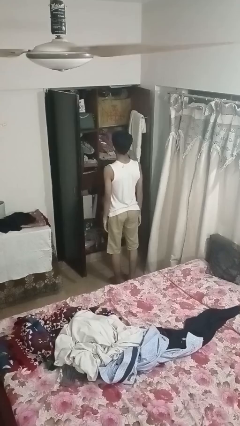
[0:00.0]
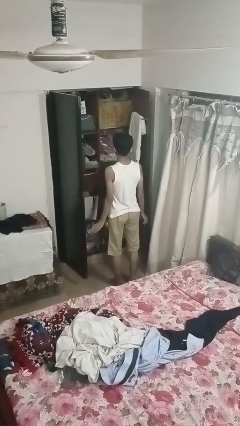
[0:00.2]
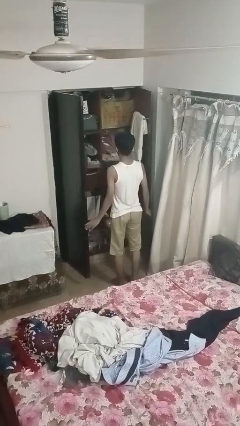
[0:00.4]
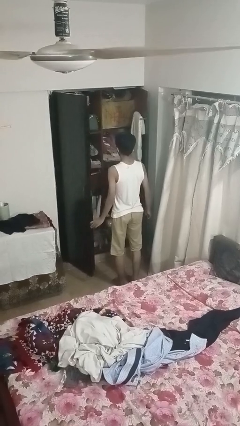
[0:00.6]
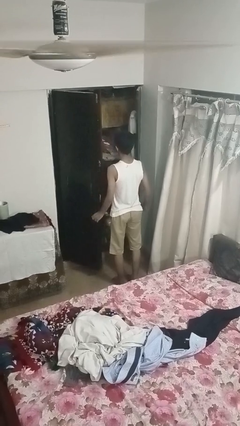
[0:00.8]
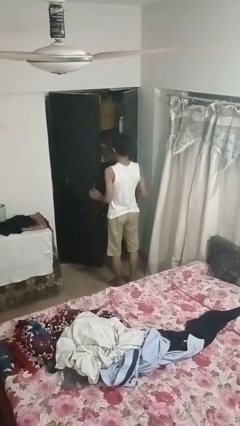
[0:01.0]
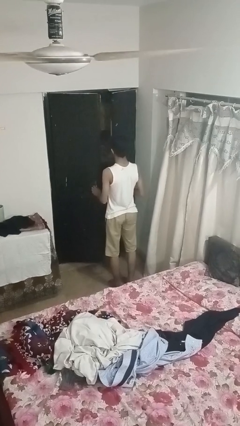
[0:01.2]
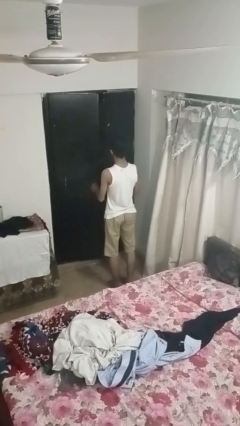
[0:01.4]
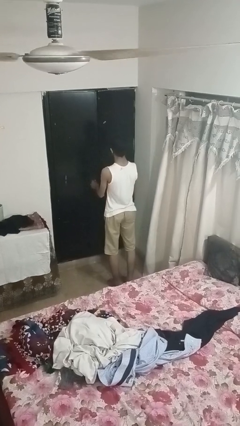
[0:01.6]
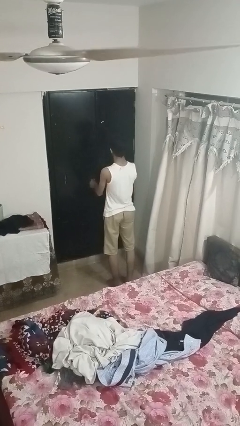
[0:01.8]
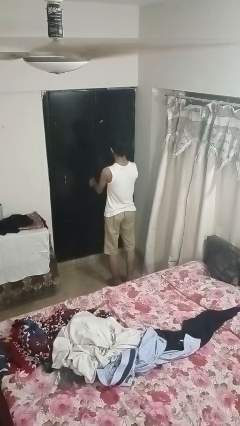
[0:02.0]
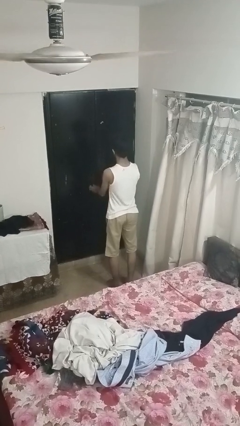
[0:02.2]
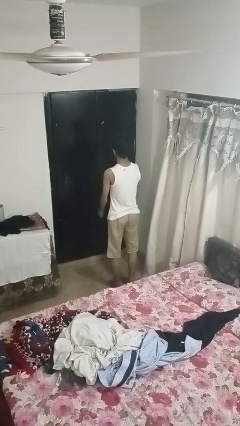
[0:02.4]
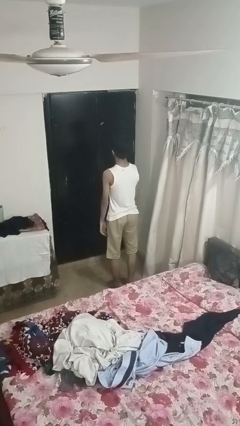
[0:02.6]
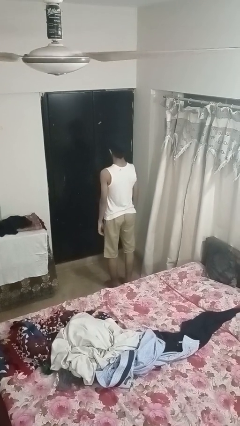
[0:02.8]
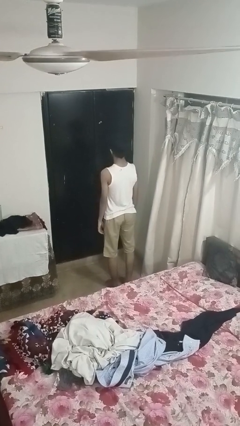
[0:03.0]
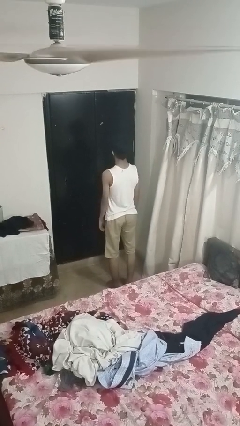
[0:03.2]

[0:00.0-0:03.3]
person closes closet door

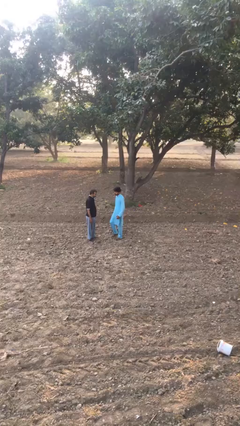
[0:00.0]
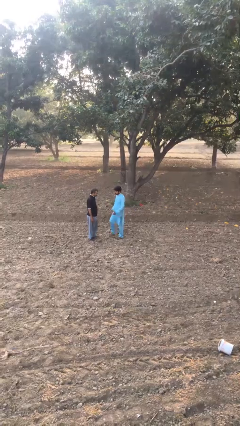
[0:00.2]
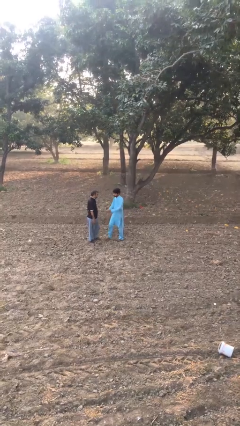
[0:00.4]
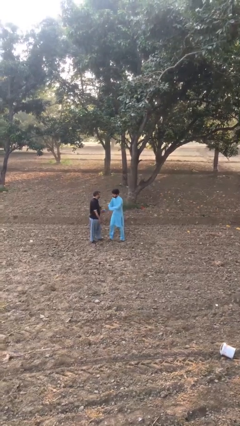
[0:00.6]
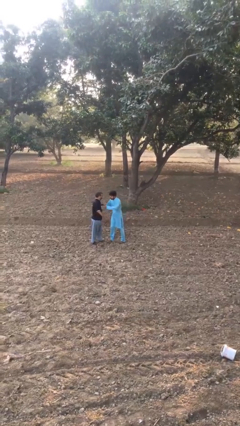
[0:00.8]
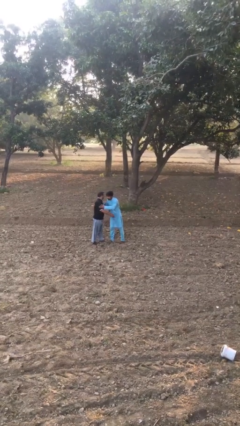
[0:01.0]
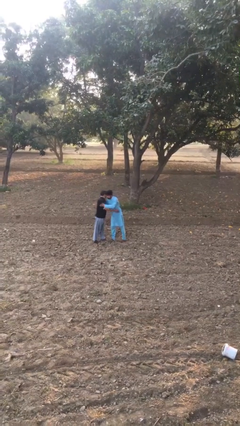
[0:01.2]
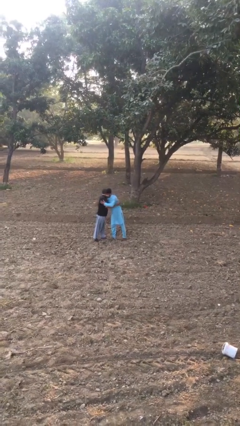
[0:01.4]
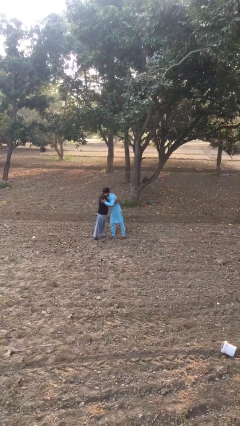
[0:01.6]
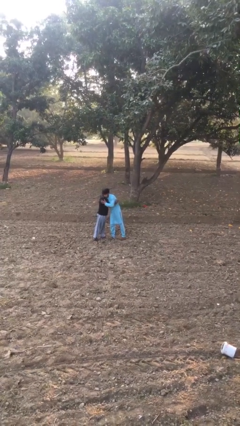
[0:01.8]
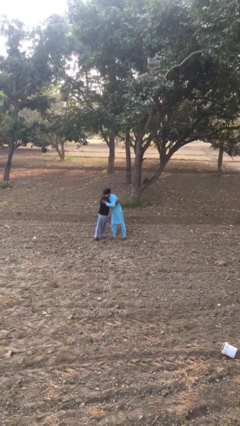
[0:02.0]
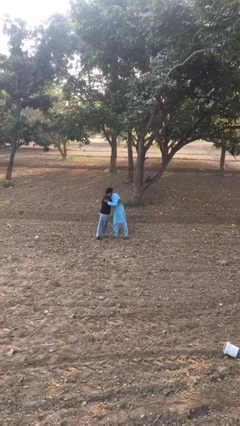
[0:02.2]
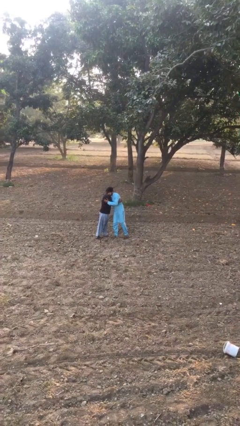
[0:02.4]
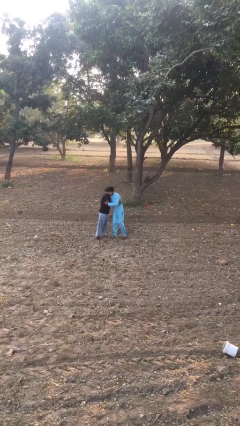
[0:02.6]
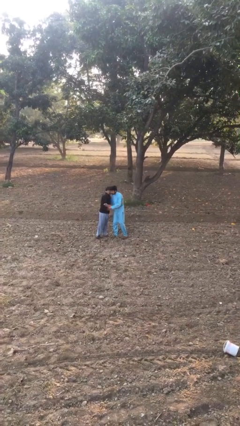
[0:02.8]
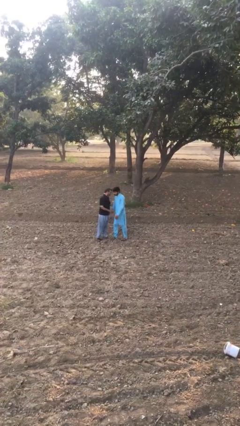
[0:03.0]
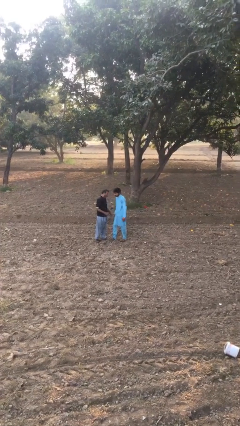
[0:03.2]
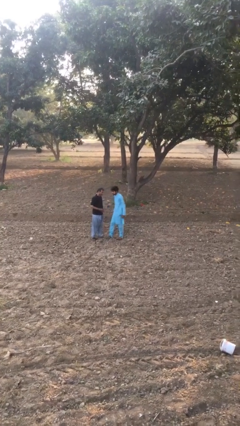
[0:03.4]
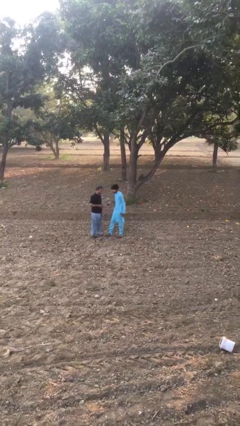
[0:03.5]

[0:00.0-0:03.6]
person embraces person

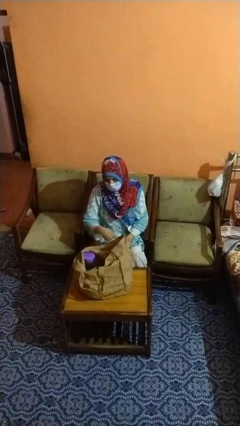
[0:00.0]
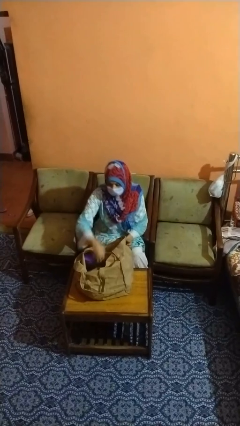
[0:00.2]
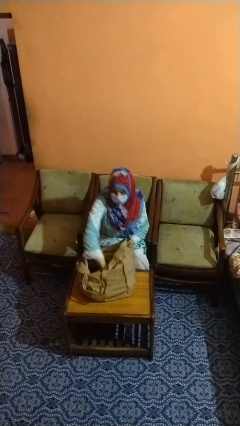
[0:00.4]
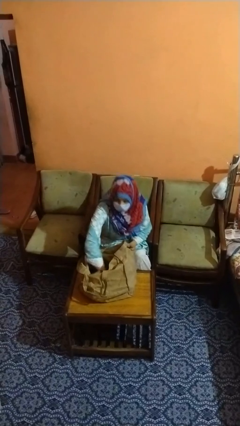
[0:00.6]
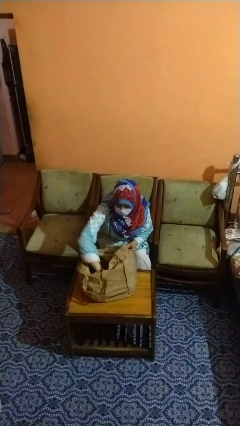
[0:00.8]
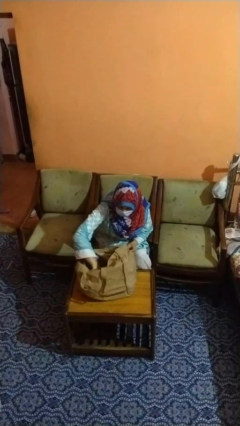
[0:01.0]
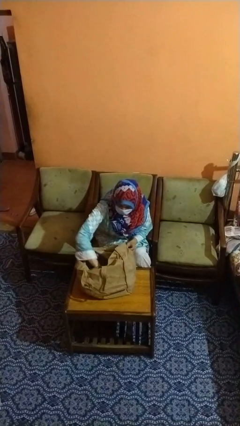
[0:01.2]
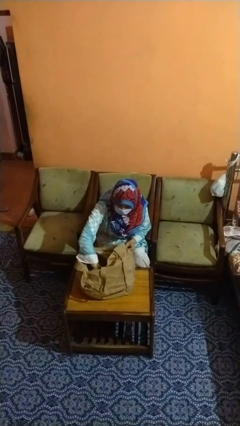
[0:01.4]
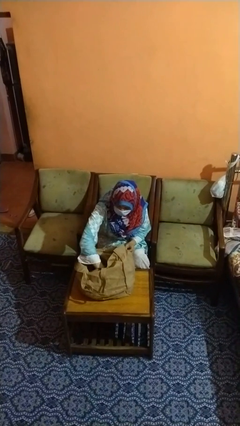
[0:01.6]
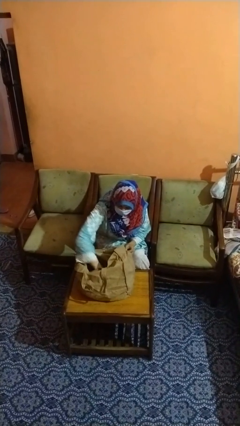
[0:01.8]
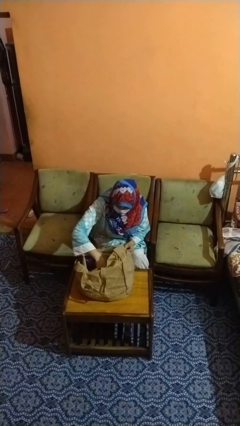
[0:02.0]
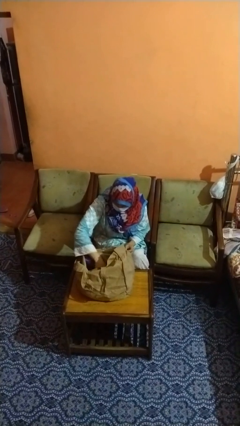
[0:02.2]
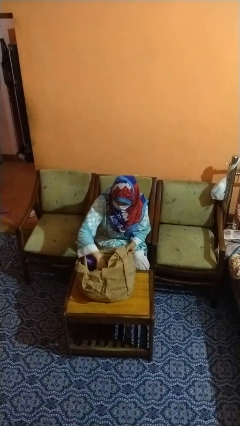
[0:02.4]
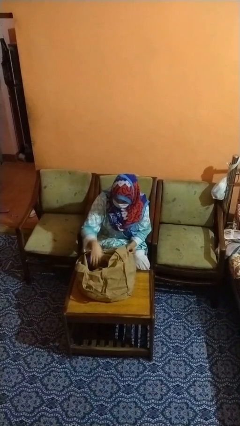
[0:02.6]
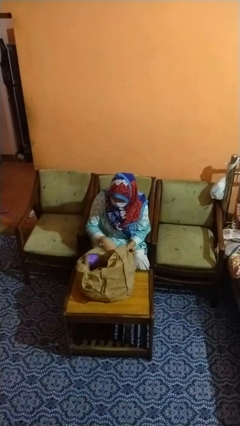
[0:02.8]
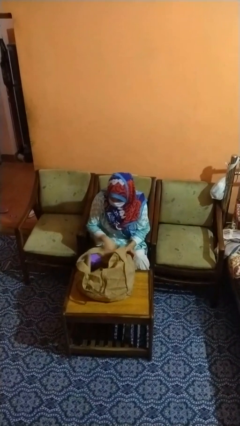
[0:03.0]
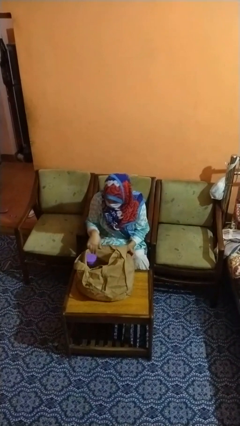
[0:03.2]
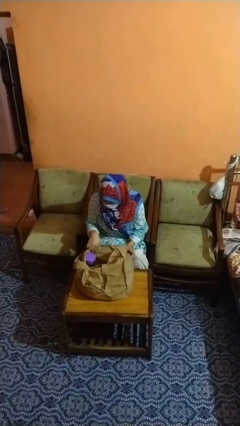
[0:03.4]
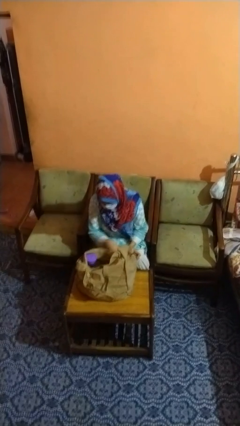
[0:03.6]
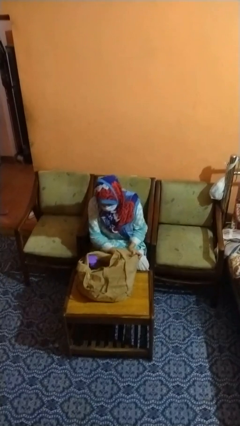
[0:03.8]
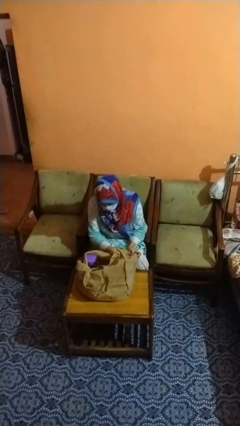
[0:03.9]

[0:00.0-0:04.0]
person searches in bag

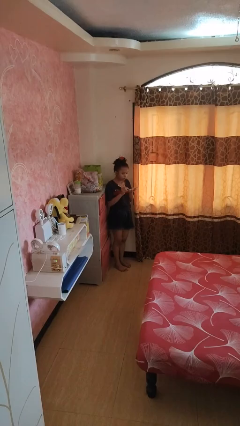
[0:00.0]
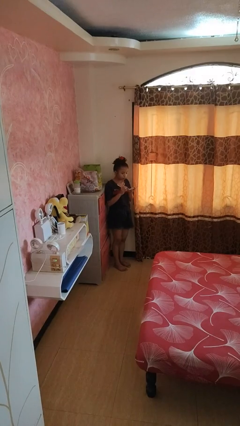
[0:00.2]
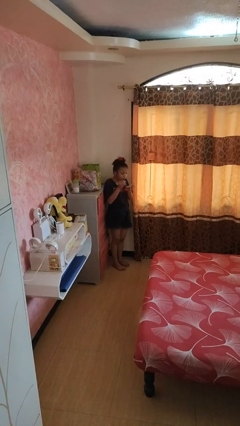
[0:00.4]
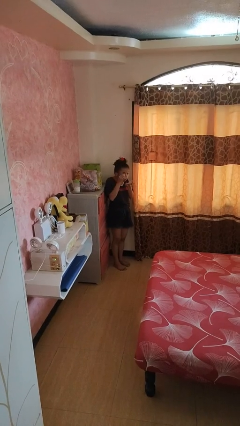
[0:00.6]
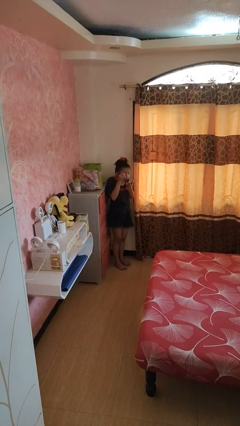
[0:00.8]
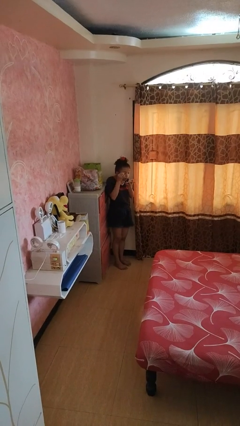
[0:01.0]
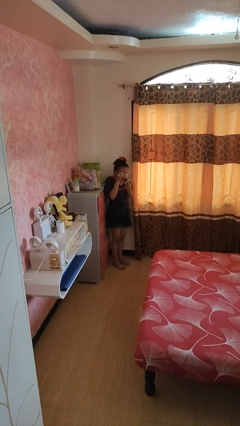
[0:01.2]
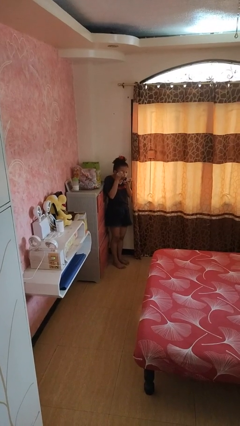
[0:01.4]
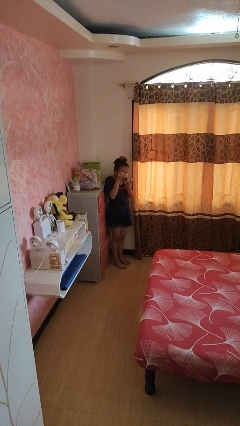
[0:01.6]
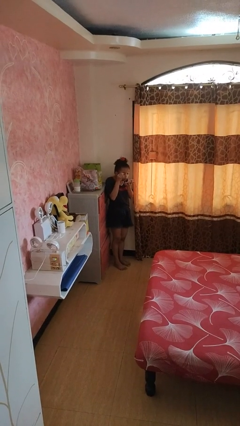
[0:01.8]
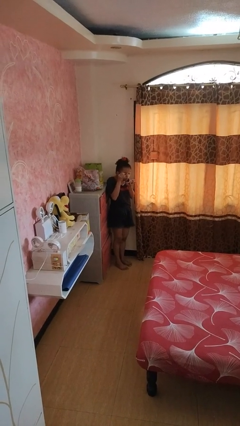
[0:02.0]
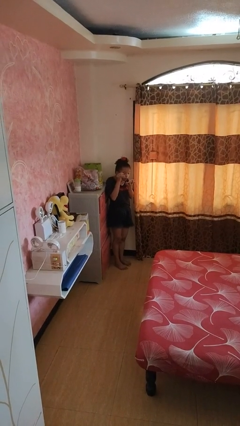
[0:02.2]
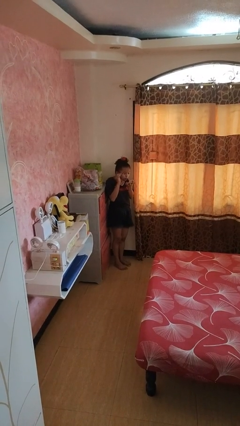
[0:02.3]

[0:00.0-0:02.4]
person applies eye makeup

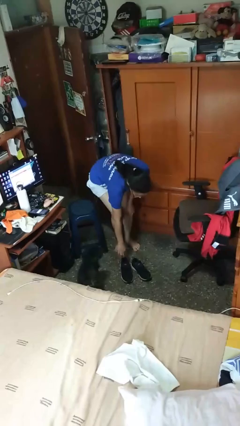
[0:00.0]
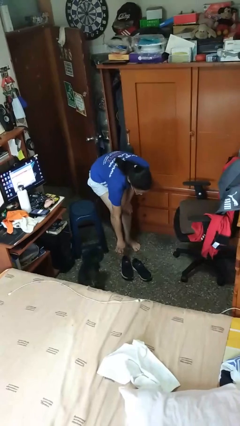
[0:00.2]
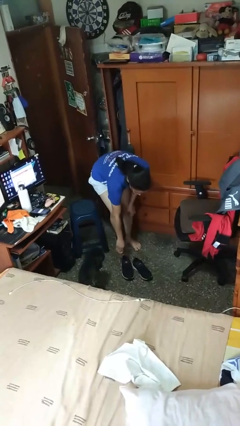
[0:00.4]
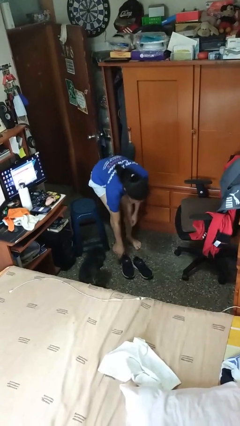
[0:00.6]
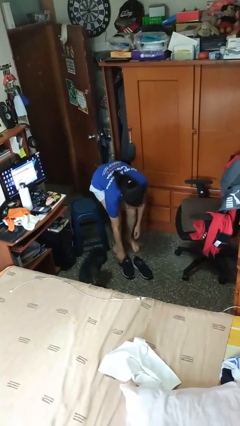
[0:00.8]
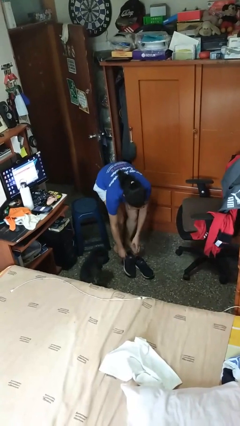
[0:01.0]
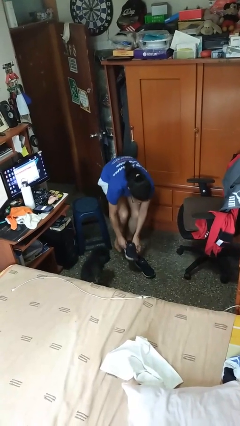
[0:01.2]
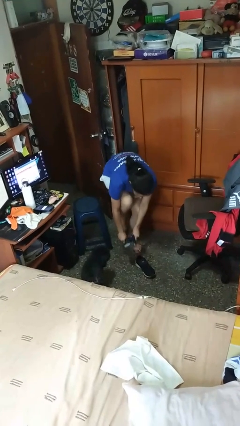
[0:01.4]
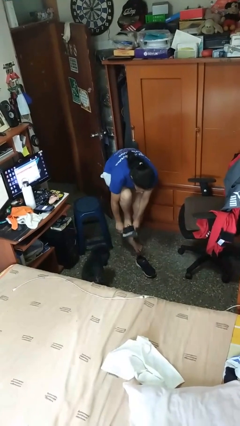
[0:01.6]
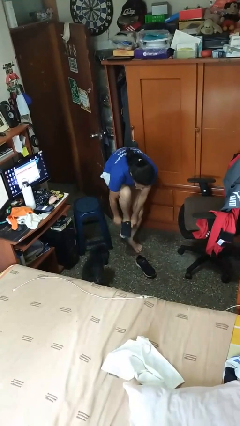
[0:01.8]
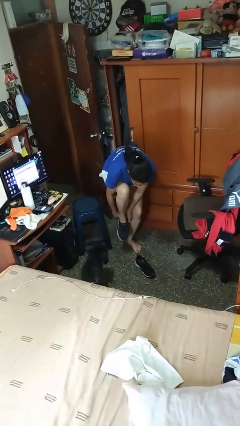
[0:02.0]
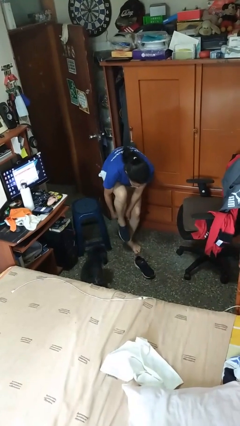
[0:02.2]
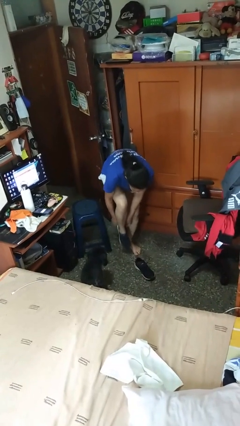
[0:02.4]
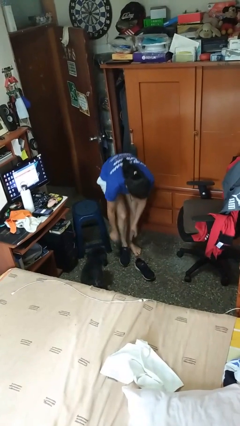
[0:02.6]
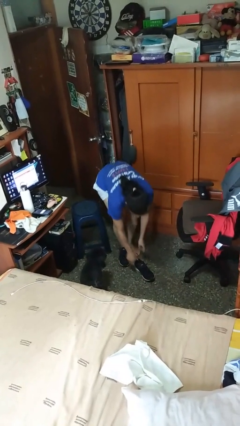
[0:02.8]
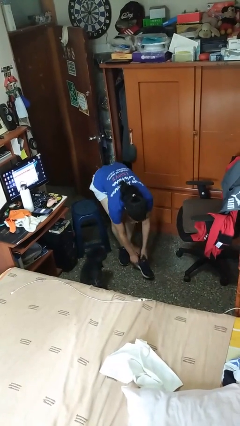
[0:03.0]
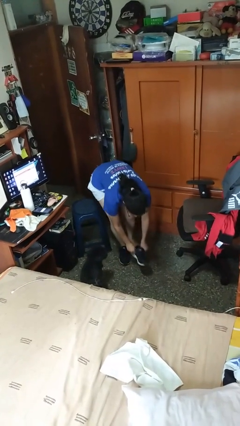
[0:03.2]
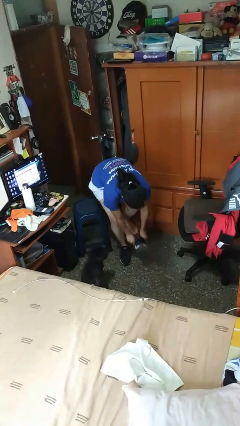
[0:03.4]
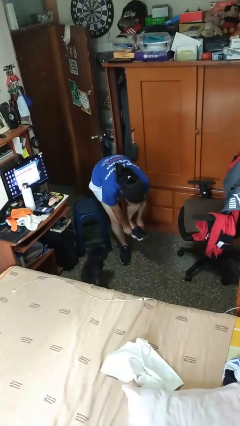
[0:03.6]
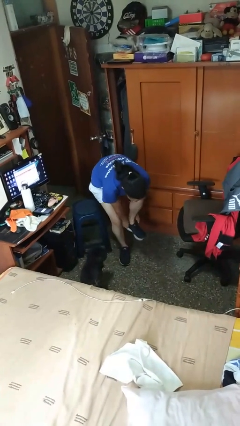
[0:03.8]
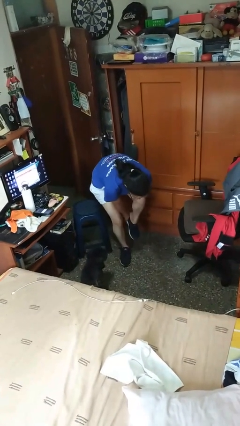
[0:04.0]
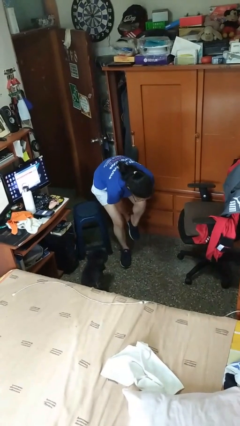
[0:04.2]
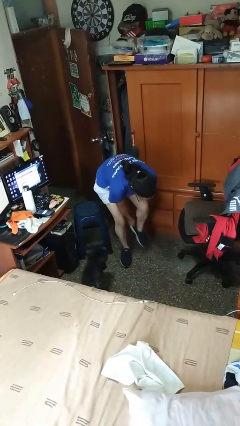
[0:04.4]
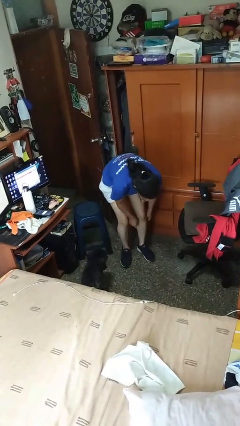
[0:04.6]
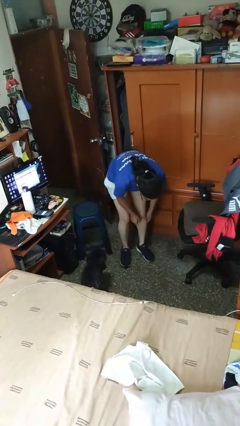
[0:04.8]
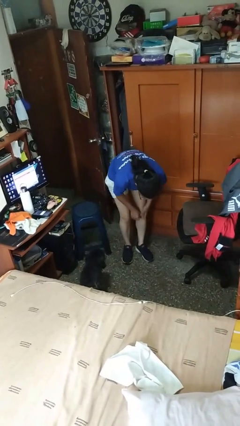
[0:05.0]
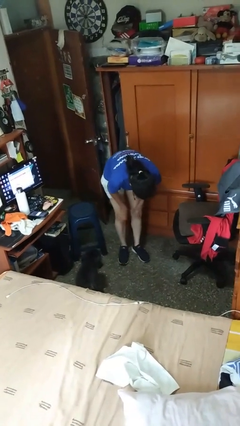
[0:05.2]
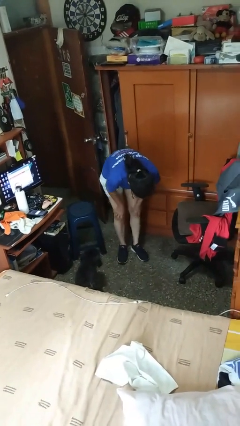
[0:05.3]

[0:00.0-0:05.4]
person puts on shoes
